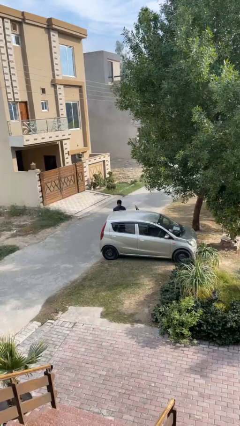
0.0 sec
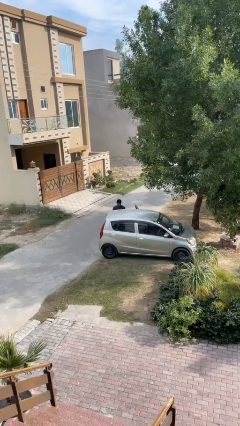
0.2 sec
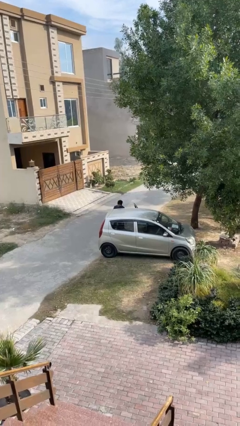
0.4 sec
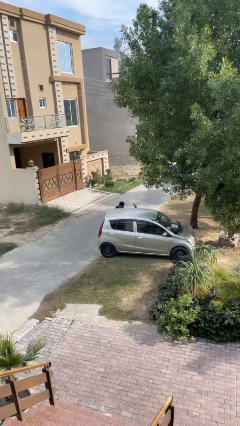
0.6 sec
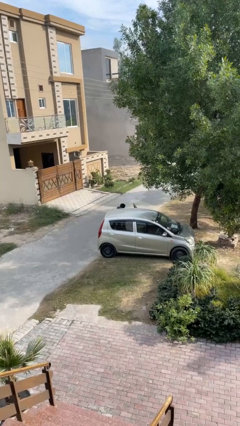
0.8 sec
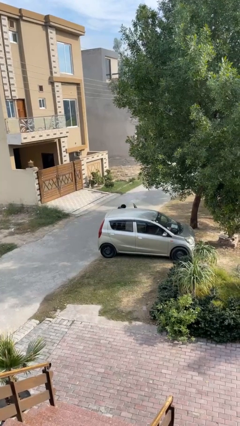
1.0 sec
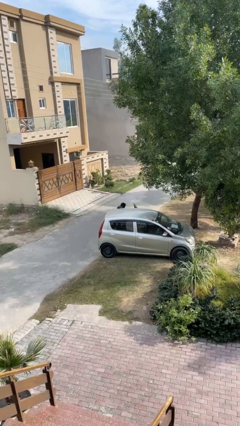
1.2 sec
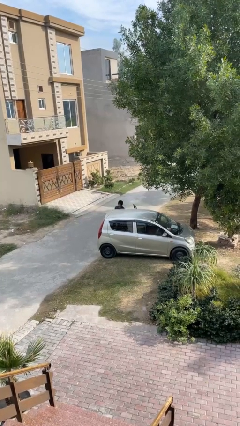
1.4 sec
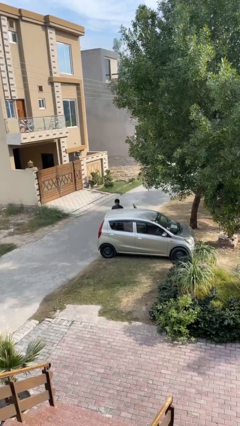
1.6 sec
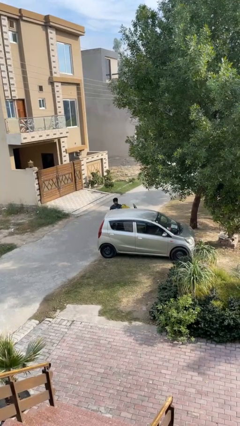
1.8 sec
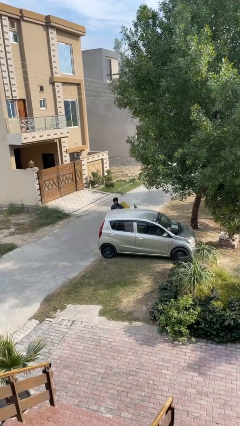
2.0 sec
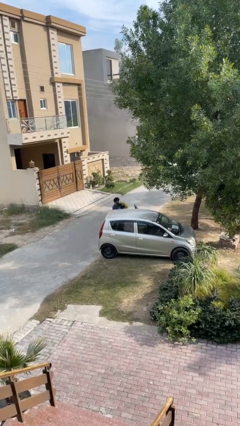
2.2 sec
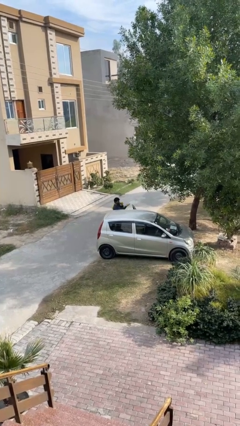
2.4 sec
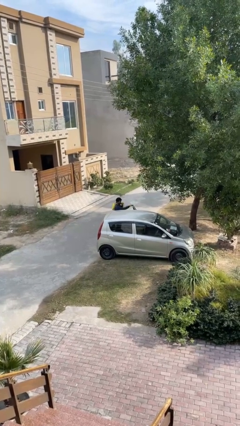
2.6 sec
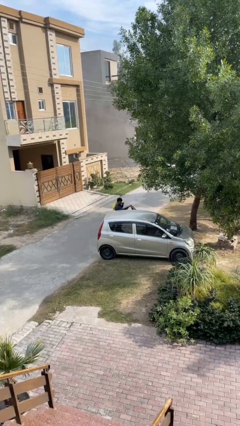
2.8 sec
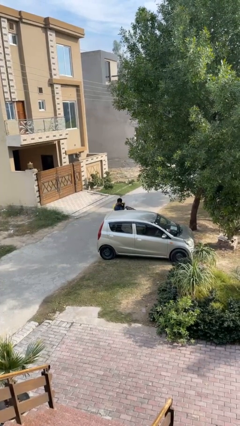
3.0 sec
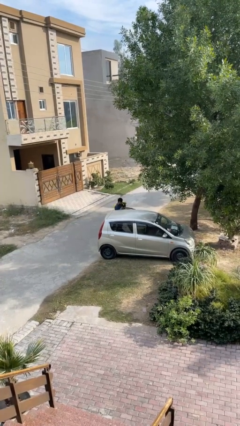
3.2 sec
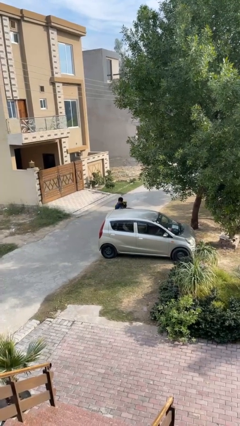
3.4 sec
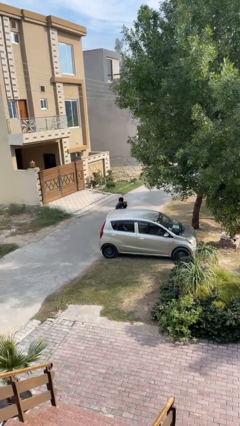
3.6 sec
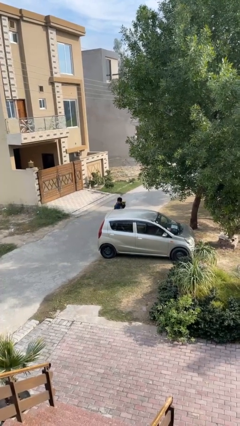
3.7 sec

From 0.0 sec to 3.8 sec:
person unloads car

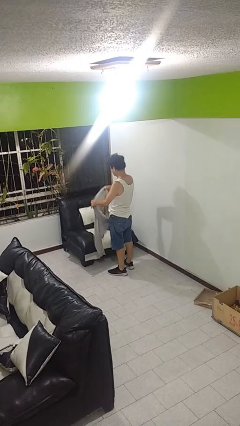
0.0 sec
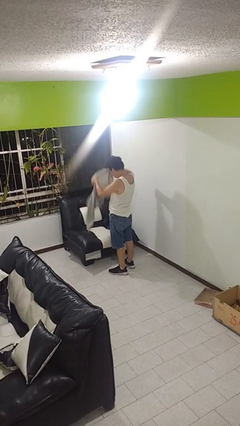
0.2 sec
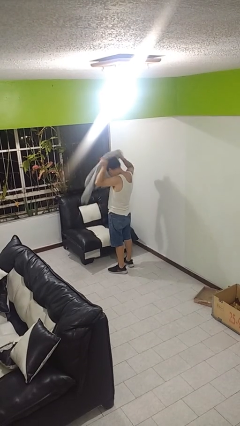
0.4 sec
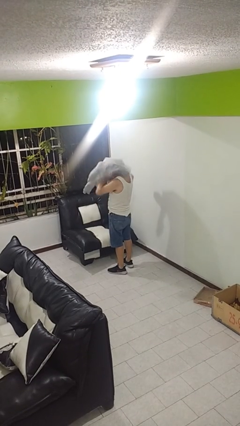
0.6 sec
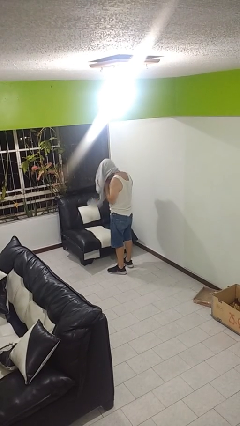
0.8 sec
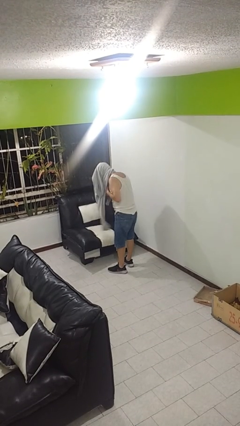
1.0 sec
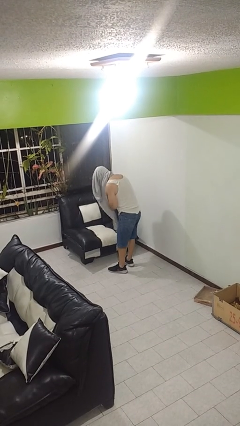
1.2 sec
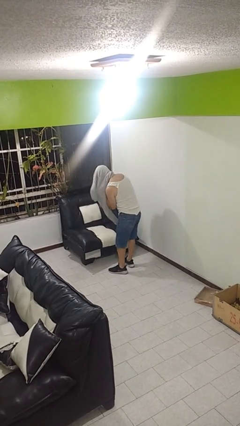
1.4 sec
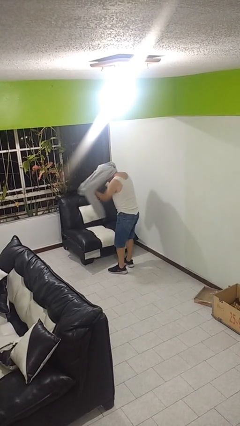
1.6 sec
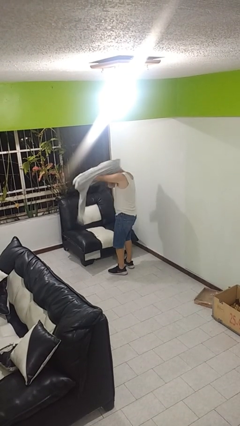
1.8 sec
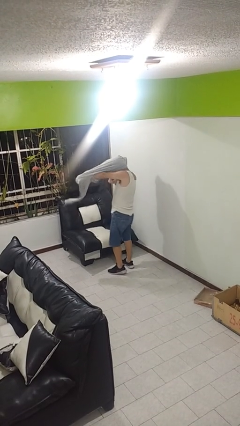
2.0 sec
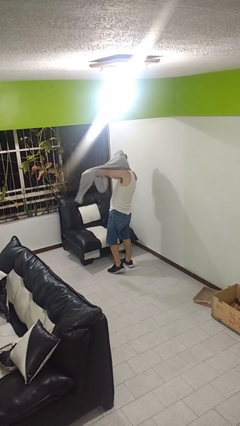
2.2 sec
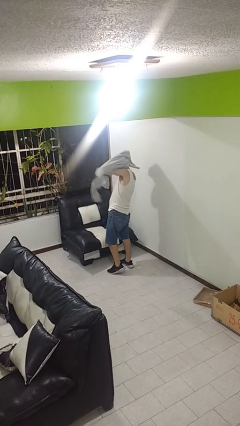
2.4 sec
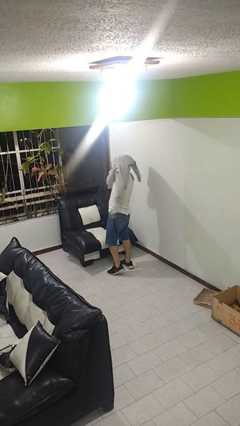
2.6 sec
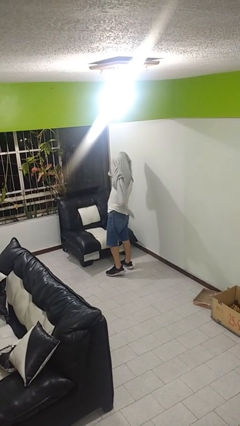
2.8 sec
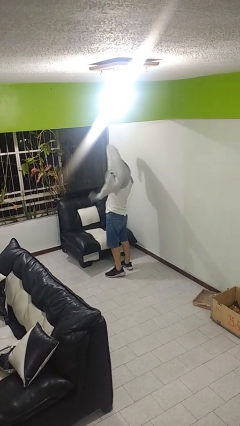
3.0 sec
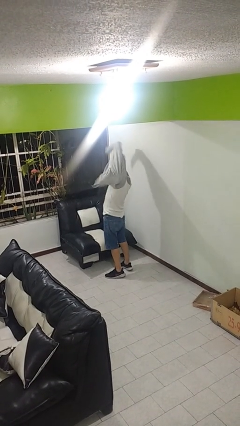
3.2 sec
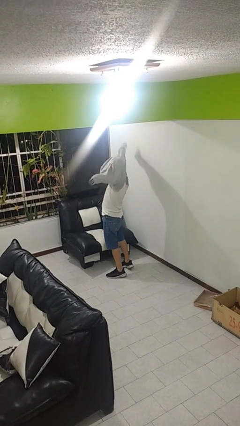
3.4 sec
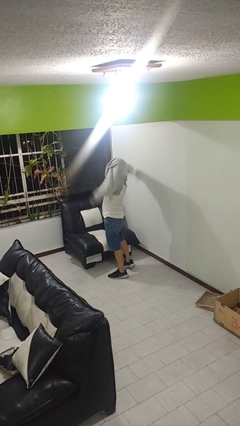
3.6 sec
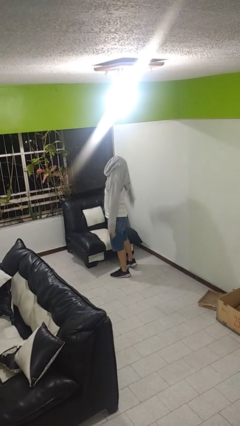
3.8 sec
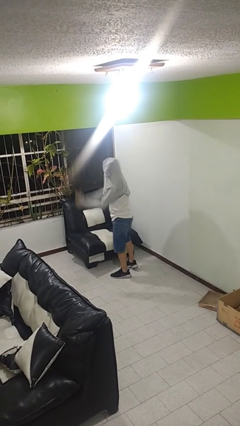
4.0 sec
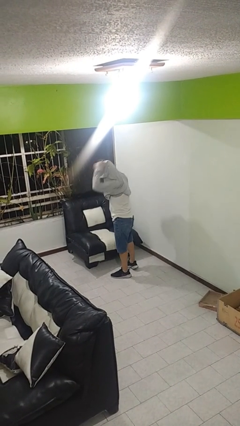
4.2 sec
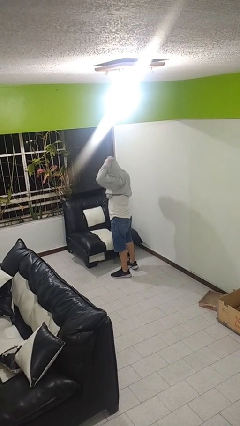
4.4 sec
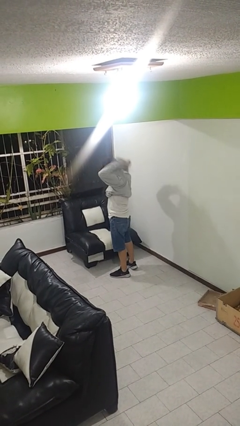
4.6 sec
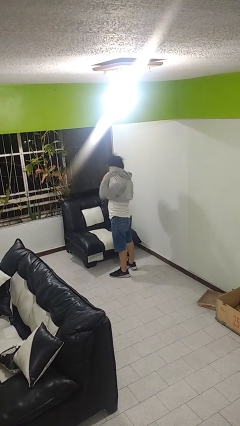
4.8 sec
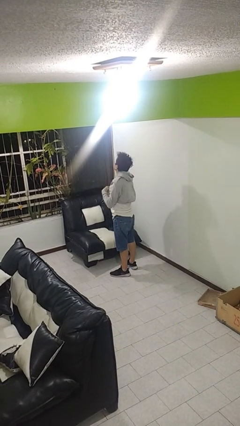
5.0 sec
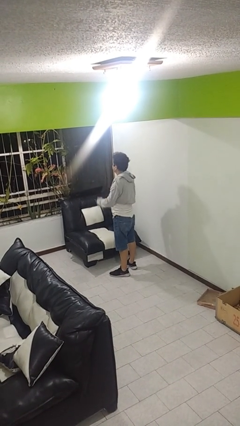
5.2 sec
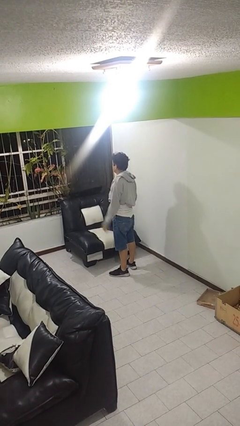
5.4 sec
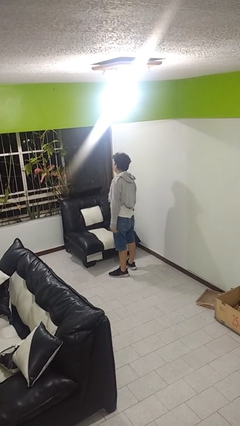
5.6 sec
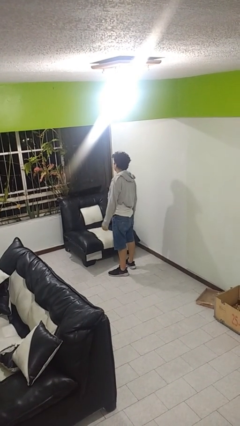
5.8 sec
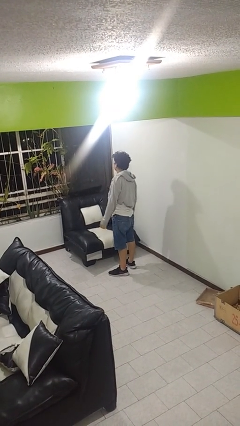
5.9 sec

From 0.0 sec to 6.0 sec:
person puts on hoodie

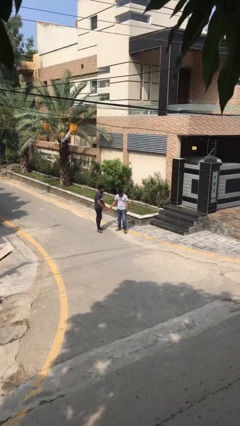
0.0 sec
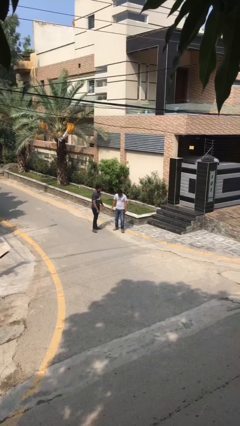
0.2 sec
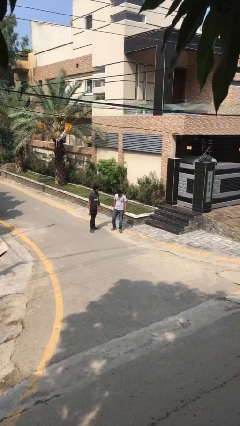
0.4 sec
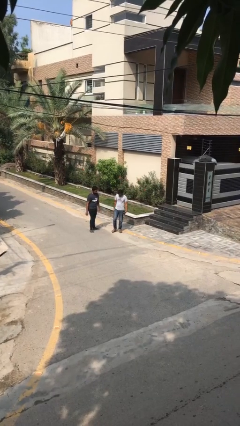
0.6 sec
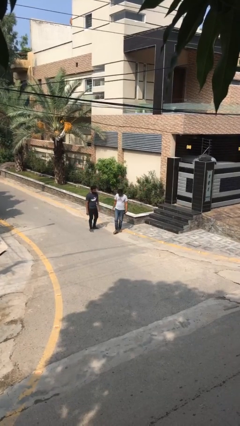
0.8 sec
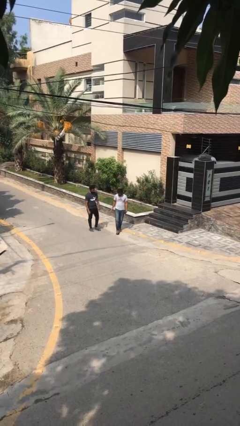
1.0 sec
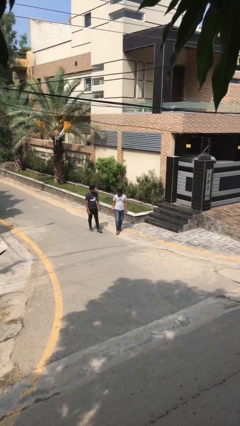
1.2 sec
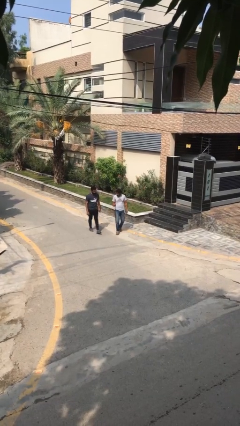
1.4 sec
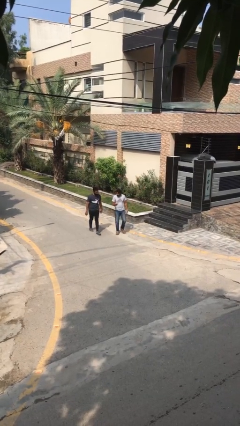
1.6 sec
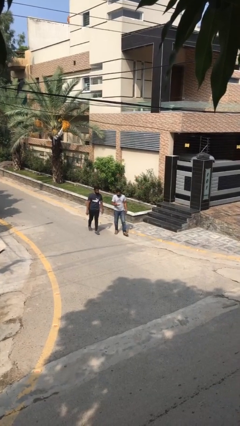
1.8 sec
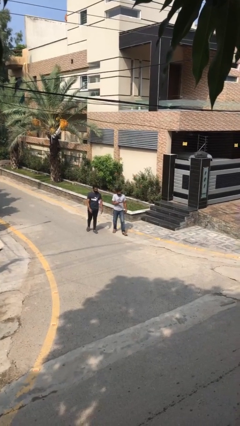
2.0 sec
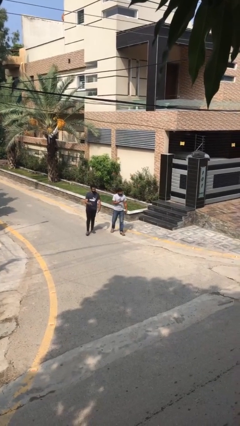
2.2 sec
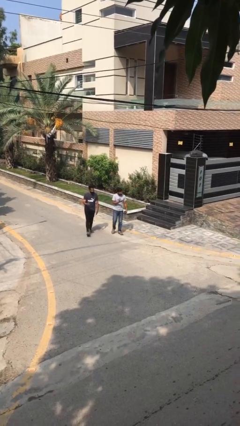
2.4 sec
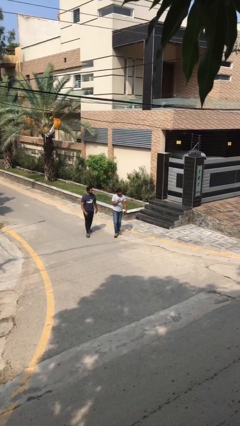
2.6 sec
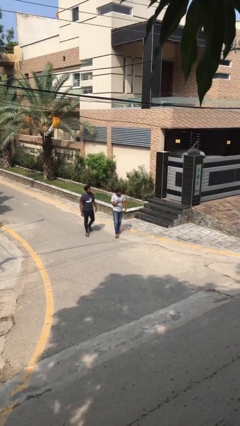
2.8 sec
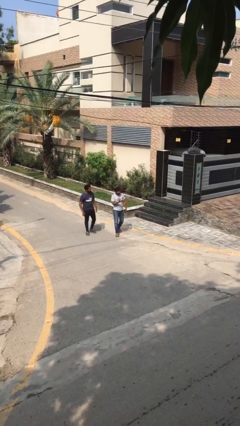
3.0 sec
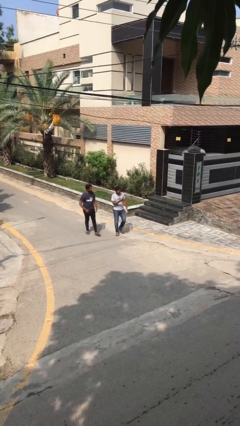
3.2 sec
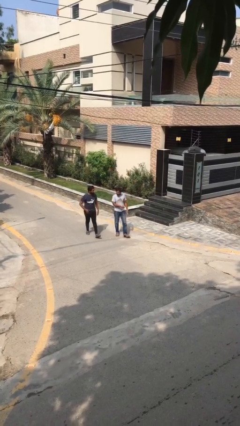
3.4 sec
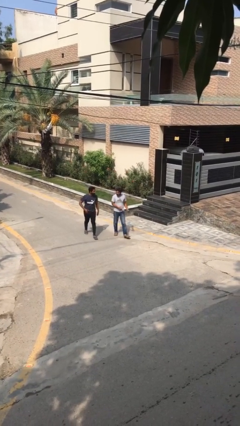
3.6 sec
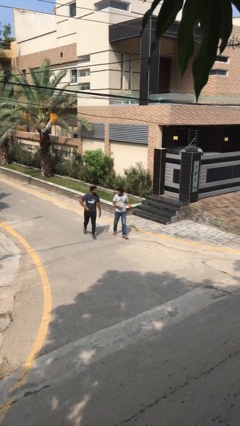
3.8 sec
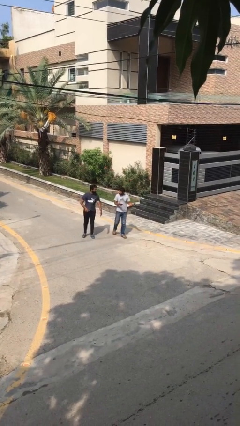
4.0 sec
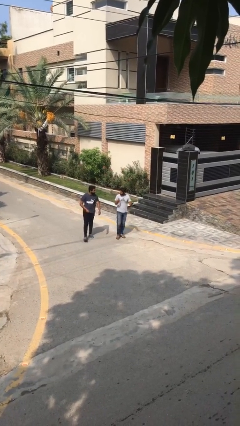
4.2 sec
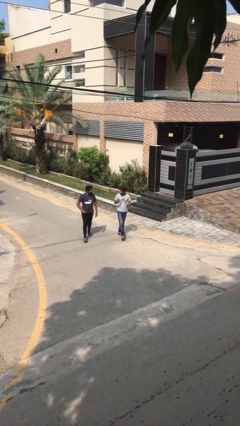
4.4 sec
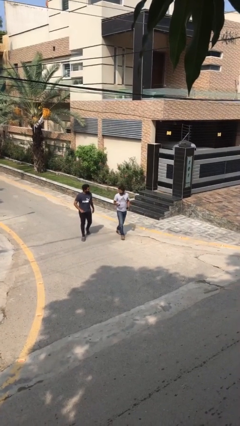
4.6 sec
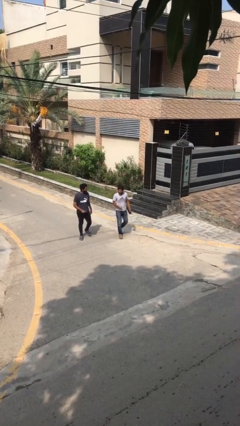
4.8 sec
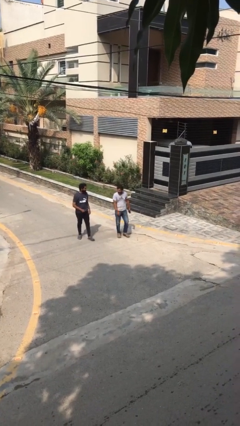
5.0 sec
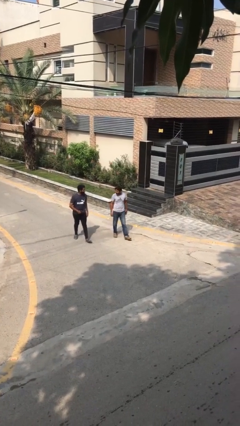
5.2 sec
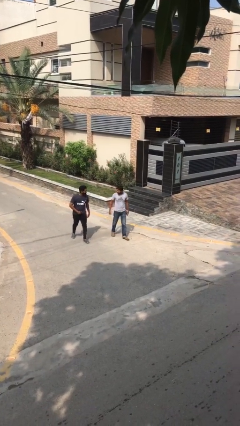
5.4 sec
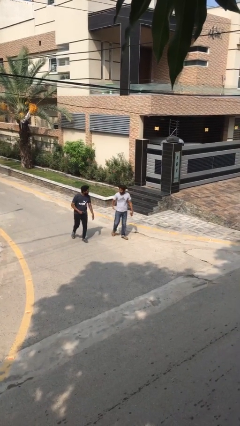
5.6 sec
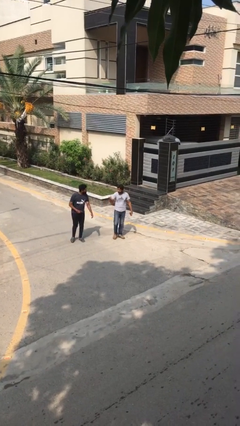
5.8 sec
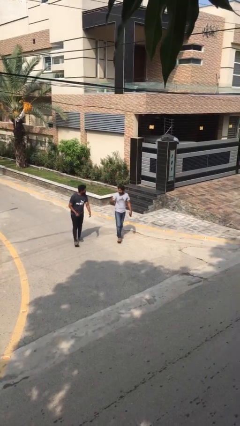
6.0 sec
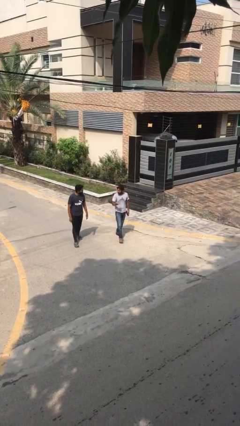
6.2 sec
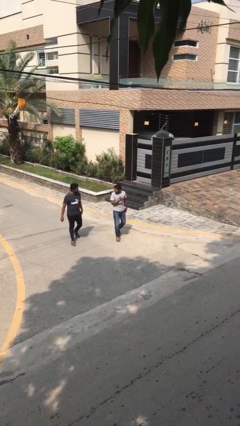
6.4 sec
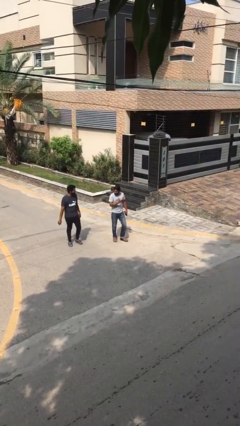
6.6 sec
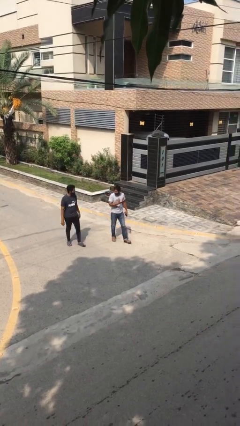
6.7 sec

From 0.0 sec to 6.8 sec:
person talks to person

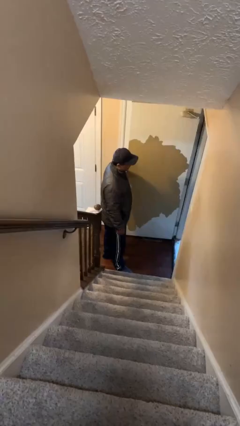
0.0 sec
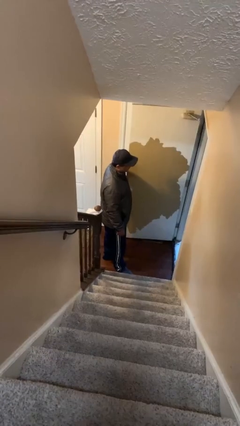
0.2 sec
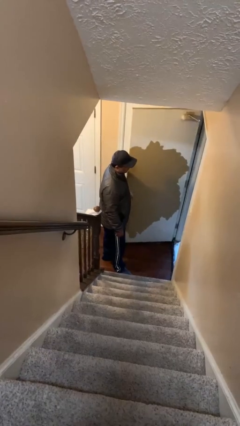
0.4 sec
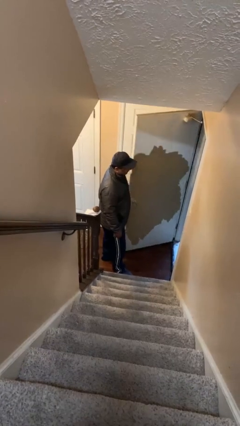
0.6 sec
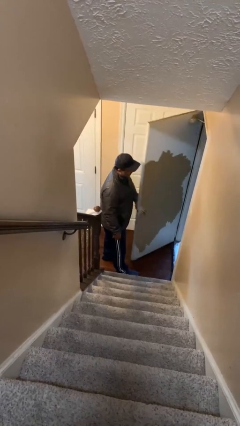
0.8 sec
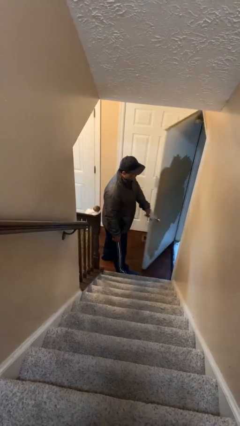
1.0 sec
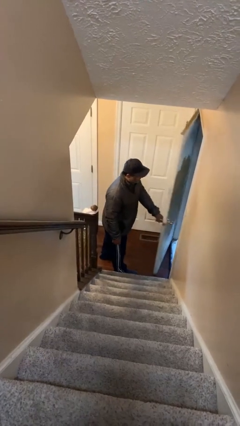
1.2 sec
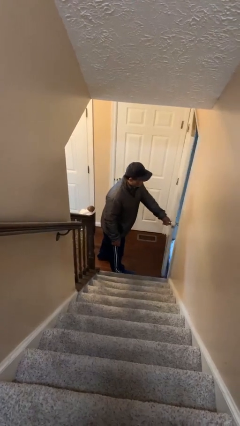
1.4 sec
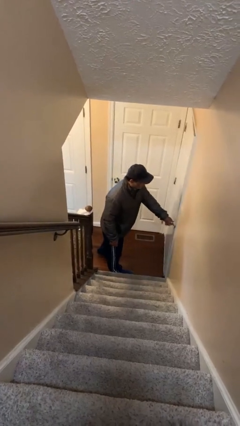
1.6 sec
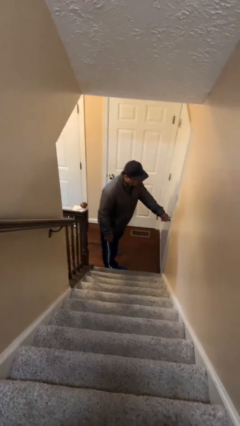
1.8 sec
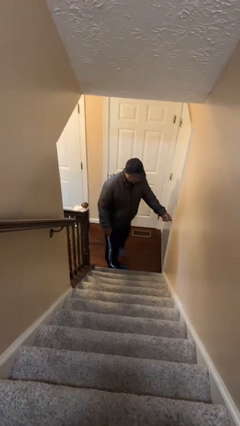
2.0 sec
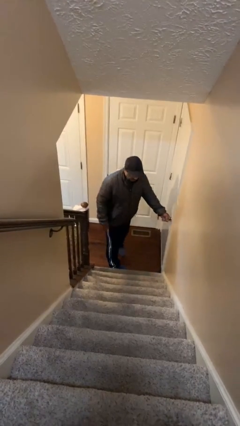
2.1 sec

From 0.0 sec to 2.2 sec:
person closes facility door
